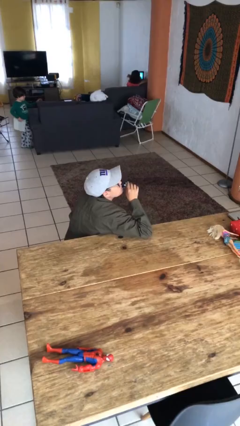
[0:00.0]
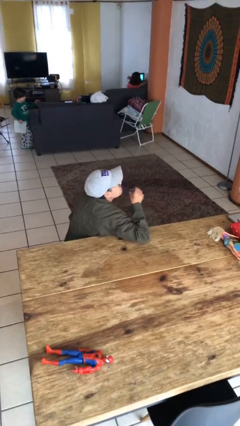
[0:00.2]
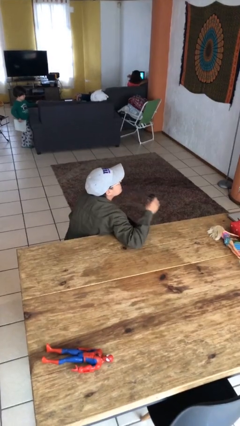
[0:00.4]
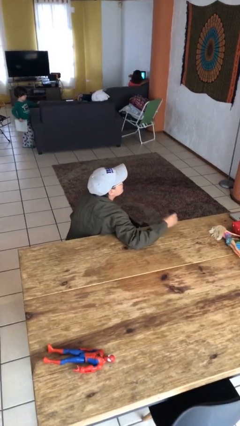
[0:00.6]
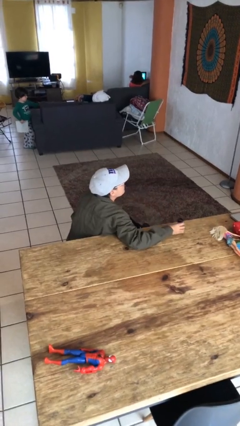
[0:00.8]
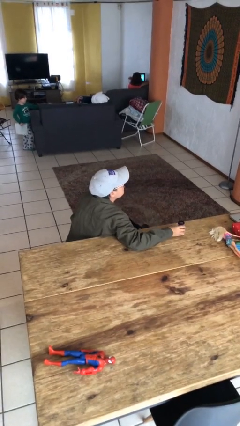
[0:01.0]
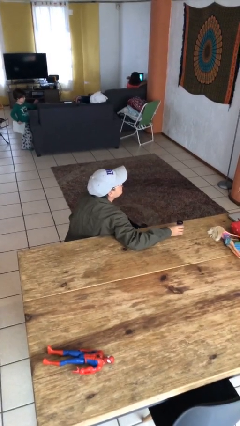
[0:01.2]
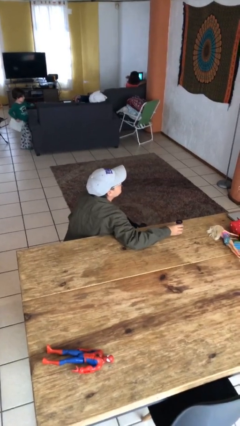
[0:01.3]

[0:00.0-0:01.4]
person puts down object on table

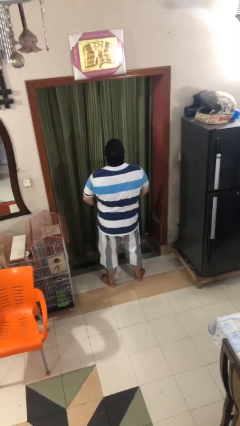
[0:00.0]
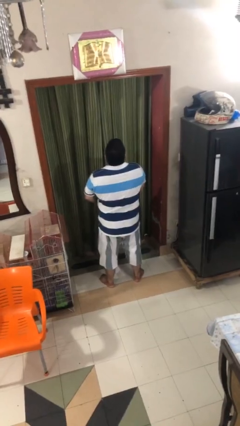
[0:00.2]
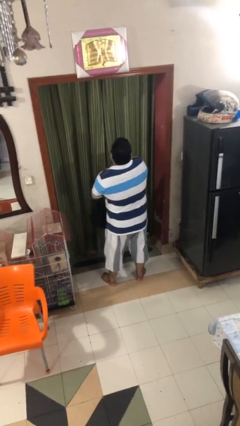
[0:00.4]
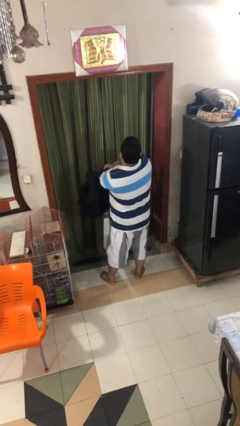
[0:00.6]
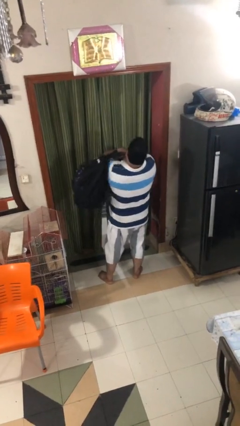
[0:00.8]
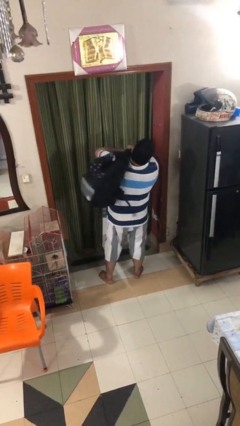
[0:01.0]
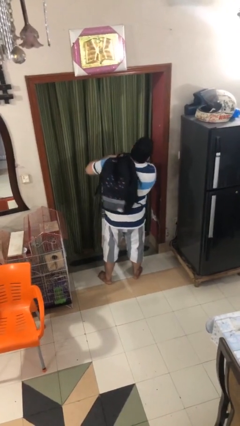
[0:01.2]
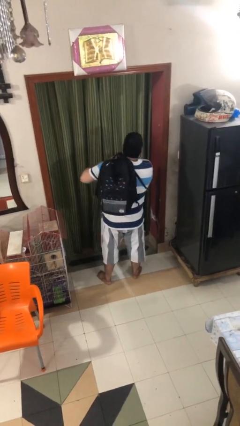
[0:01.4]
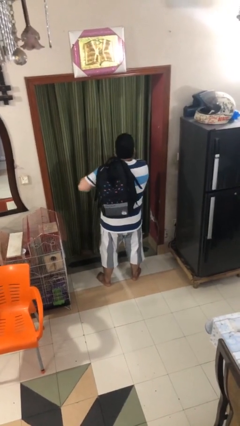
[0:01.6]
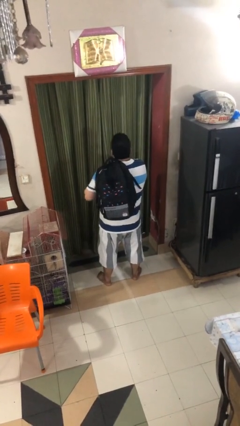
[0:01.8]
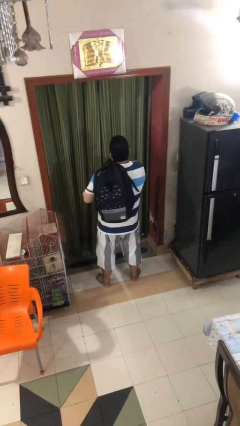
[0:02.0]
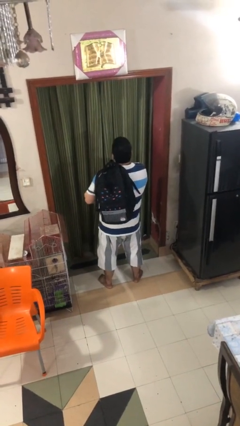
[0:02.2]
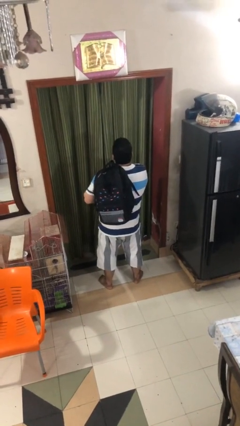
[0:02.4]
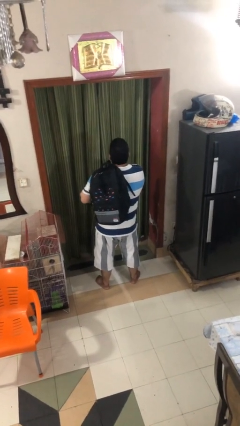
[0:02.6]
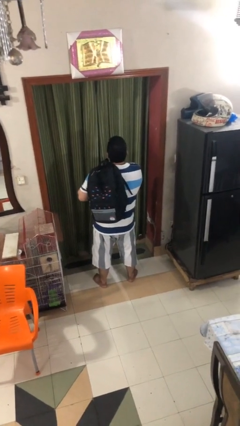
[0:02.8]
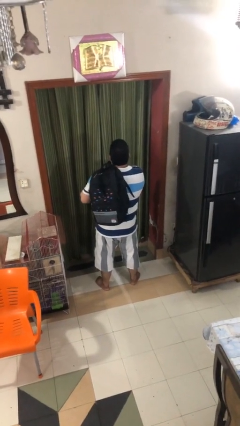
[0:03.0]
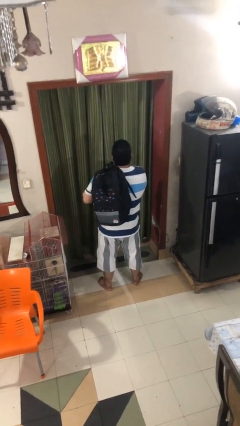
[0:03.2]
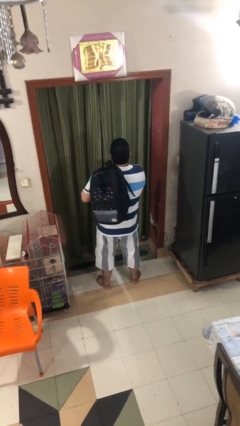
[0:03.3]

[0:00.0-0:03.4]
person puts on backpack

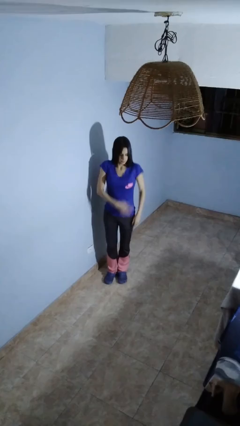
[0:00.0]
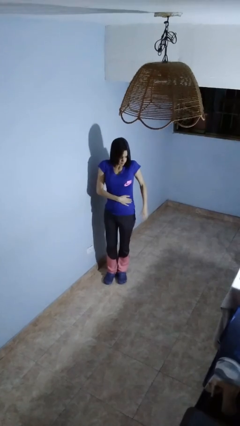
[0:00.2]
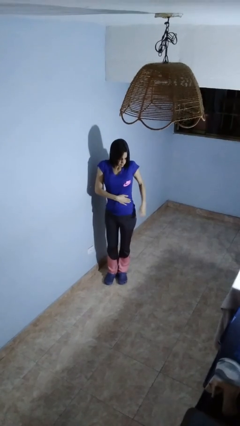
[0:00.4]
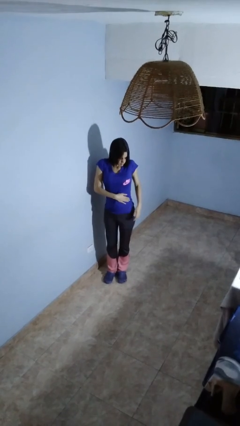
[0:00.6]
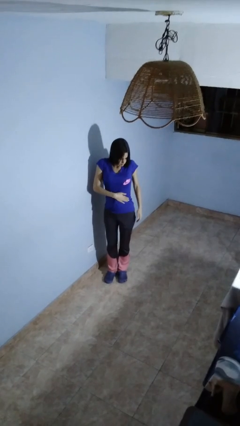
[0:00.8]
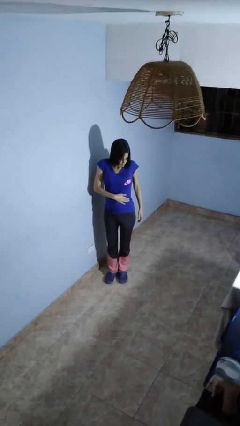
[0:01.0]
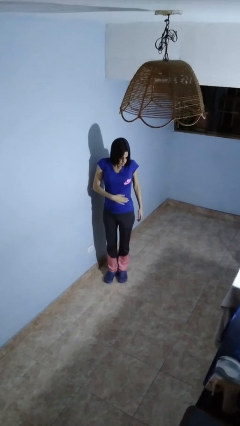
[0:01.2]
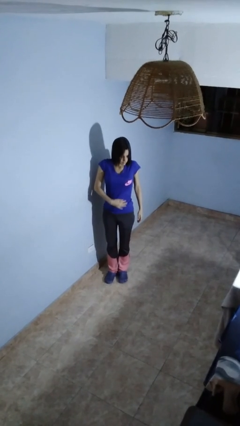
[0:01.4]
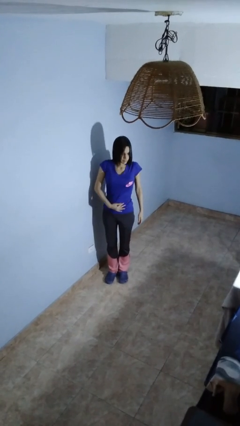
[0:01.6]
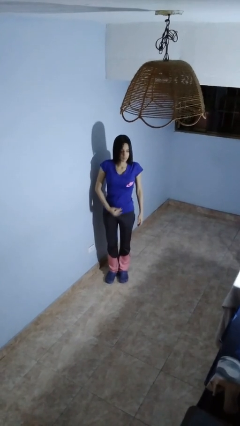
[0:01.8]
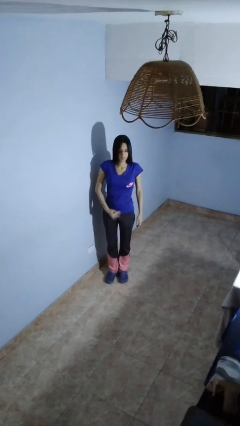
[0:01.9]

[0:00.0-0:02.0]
person swats bug

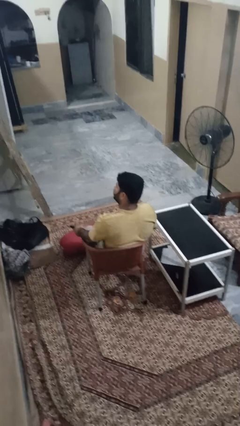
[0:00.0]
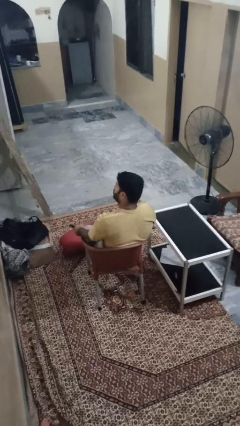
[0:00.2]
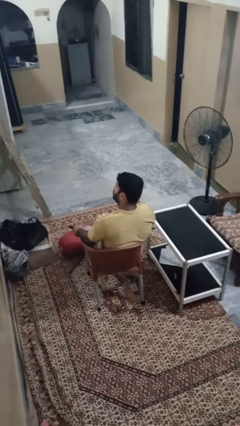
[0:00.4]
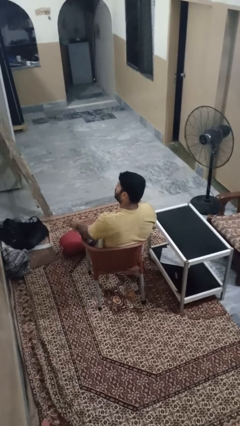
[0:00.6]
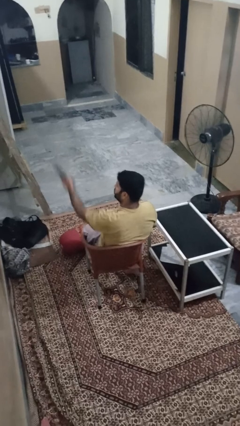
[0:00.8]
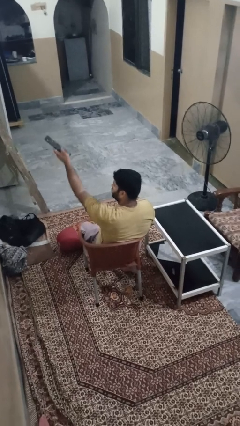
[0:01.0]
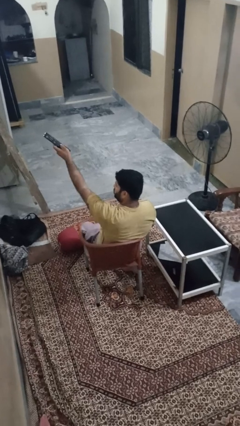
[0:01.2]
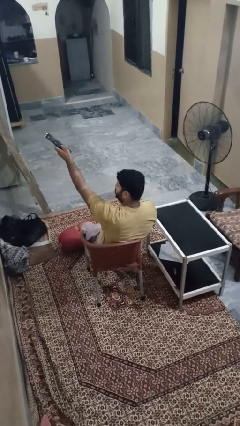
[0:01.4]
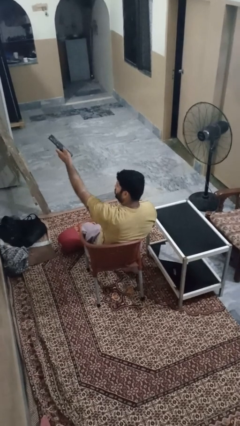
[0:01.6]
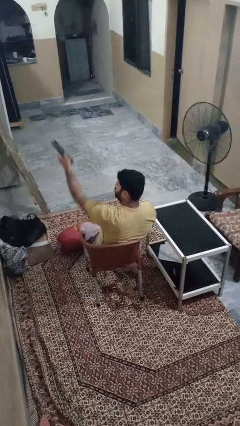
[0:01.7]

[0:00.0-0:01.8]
person uses television remote

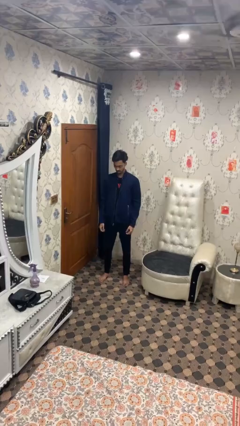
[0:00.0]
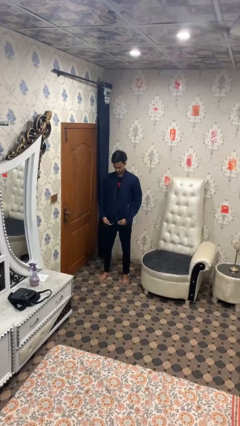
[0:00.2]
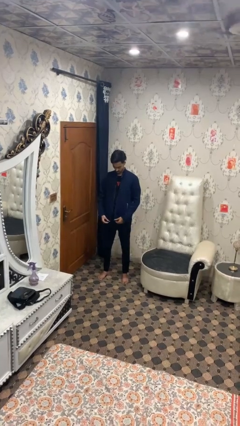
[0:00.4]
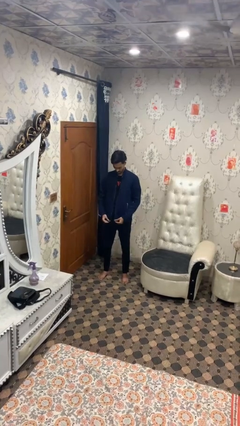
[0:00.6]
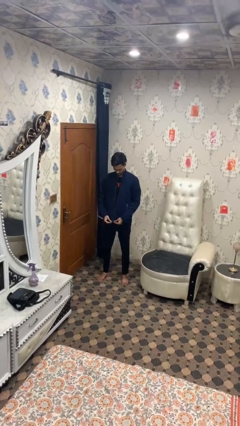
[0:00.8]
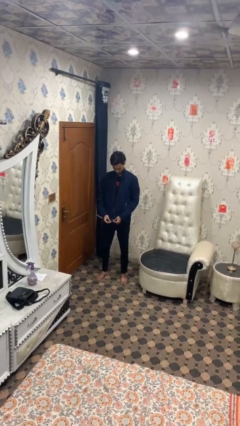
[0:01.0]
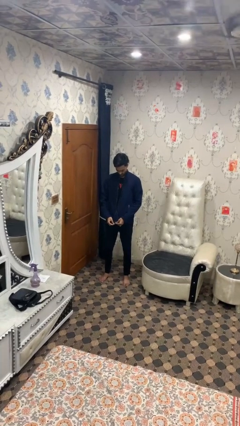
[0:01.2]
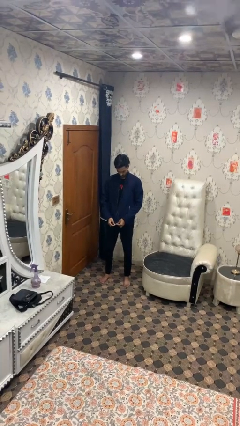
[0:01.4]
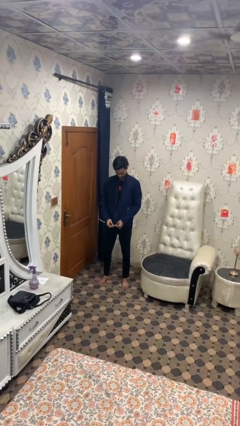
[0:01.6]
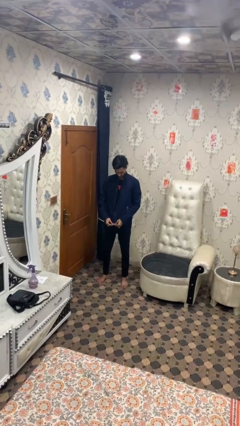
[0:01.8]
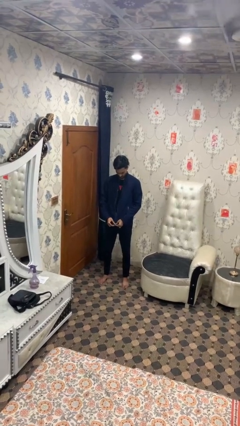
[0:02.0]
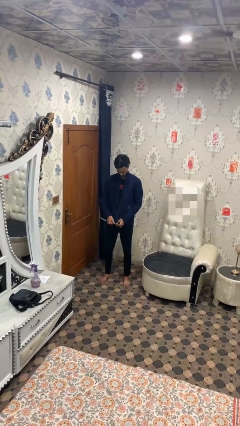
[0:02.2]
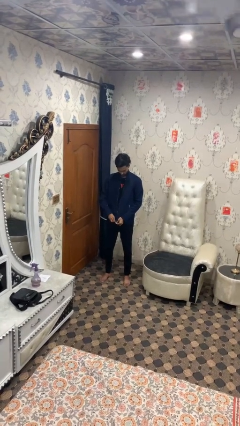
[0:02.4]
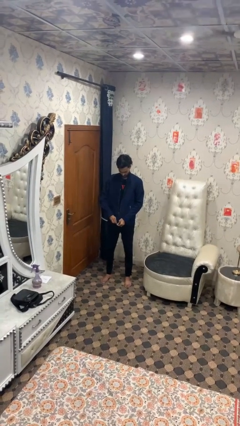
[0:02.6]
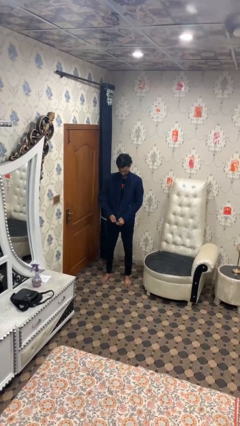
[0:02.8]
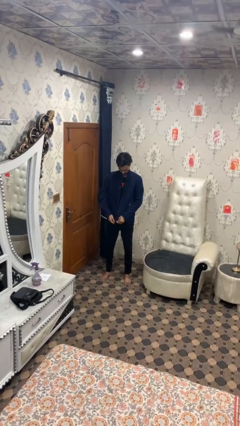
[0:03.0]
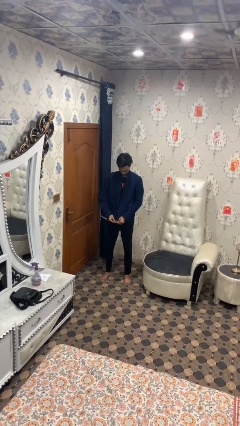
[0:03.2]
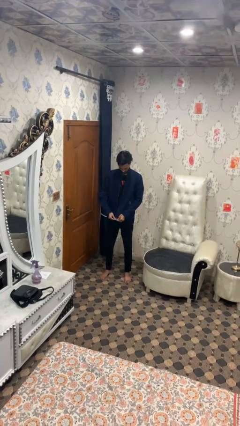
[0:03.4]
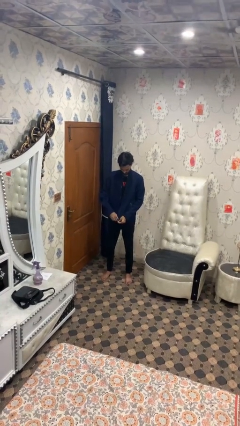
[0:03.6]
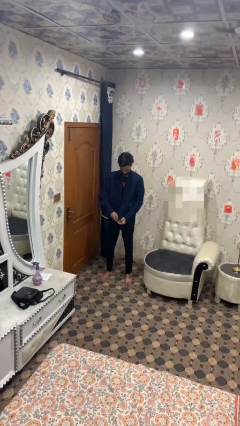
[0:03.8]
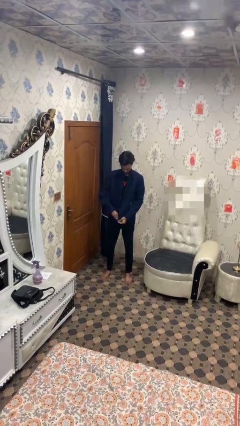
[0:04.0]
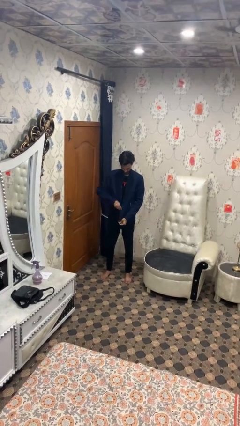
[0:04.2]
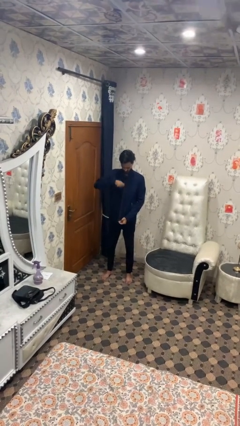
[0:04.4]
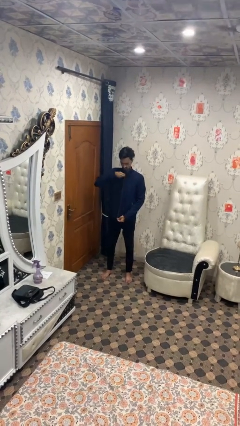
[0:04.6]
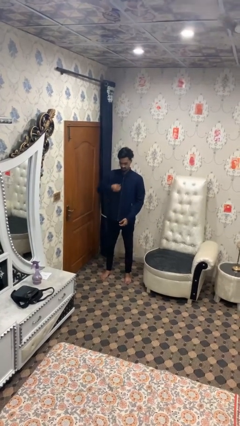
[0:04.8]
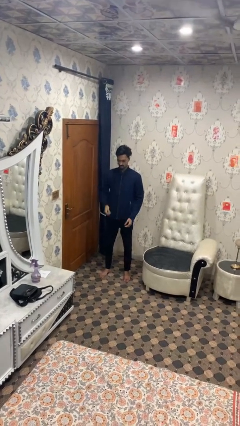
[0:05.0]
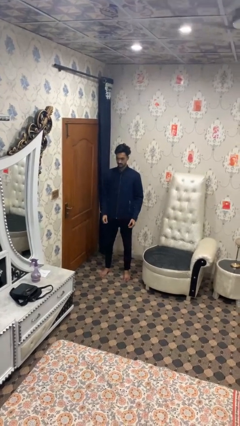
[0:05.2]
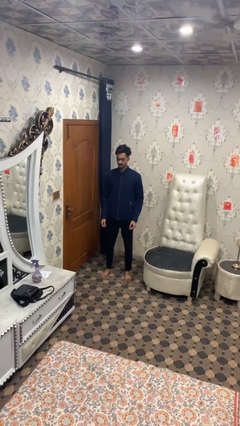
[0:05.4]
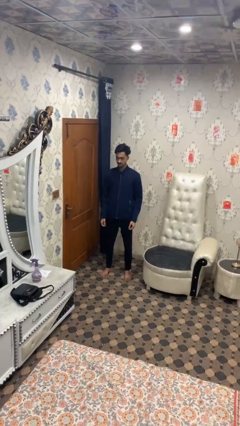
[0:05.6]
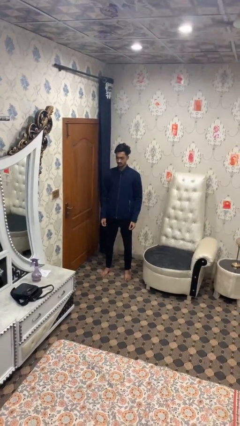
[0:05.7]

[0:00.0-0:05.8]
person zips up jacket

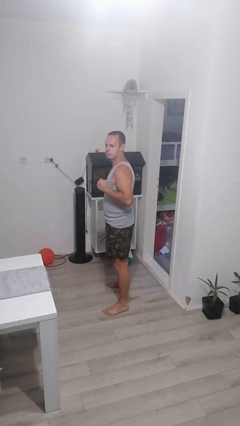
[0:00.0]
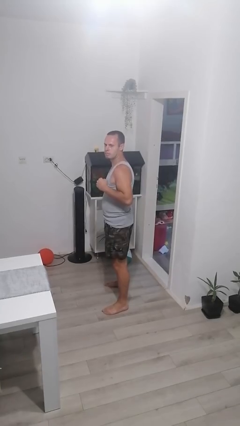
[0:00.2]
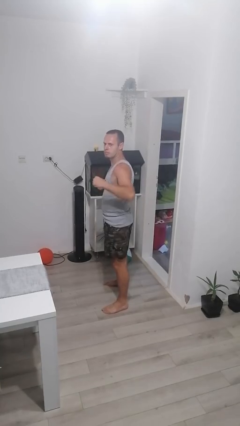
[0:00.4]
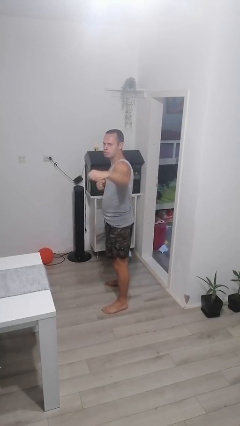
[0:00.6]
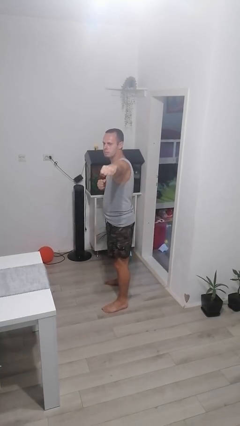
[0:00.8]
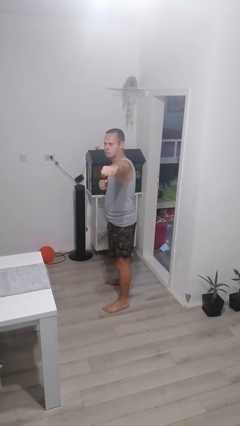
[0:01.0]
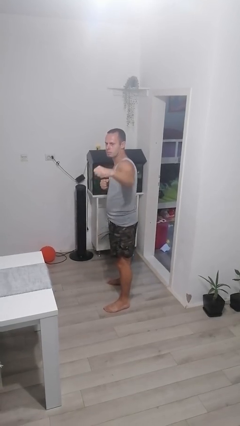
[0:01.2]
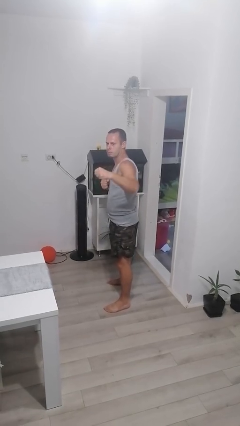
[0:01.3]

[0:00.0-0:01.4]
person karate chop

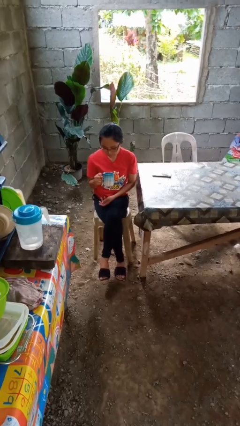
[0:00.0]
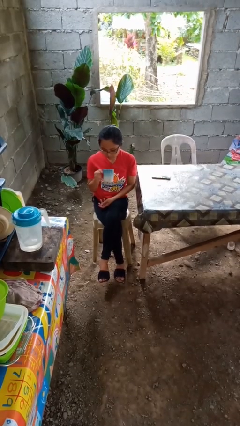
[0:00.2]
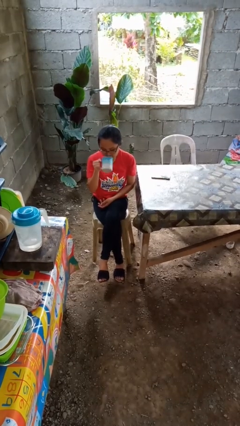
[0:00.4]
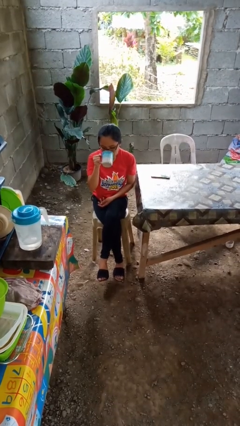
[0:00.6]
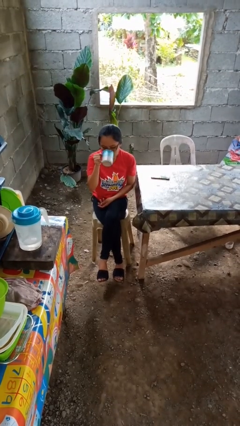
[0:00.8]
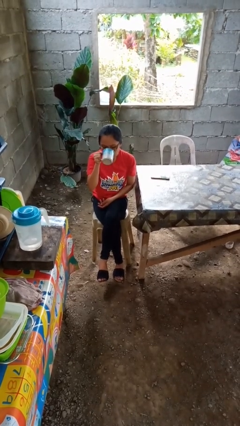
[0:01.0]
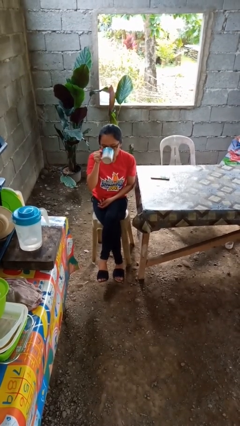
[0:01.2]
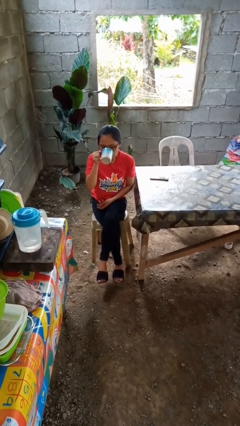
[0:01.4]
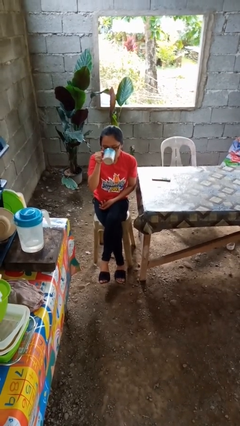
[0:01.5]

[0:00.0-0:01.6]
person drinks from mug
